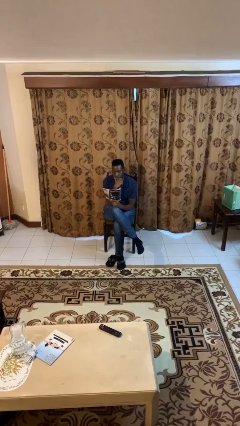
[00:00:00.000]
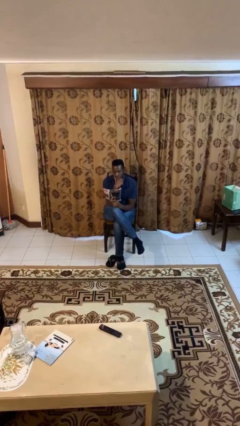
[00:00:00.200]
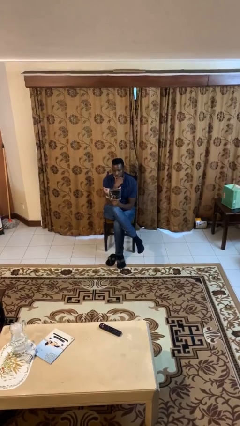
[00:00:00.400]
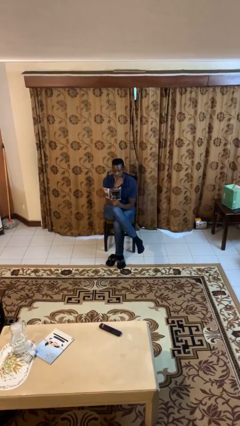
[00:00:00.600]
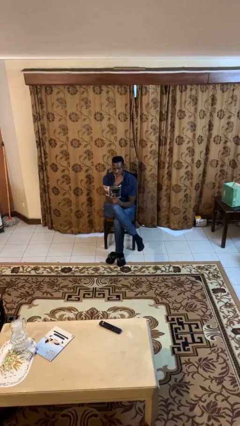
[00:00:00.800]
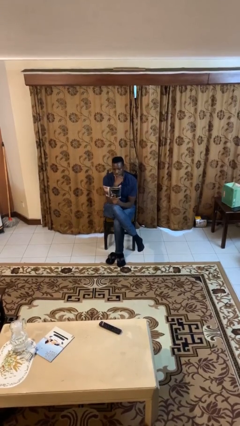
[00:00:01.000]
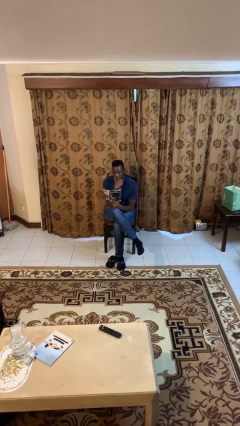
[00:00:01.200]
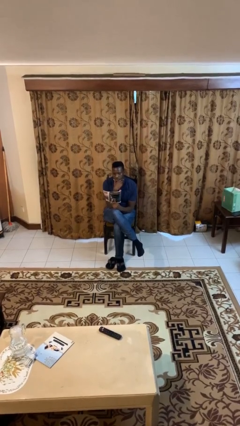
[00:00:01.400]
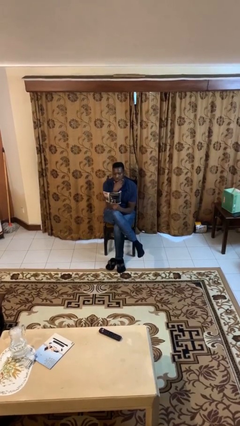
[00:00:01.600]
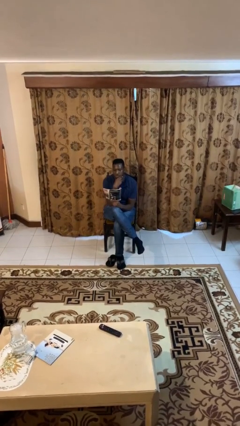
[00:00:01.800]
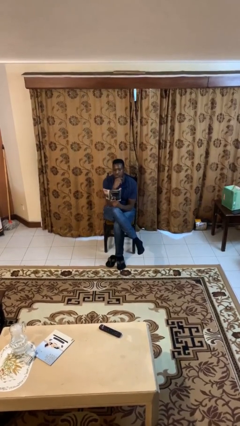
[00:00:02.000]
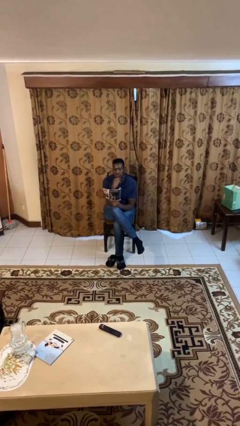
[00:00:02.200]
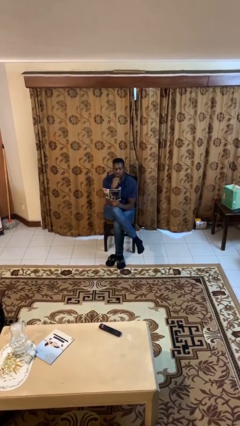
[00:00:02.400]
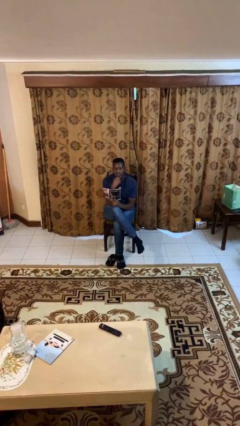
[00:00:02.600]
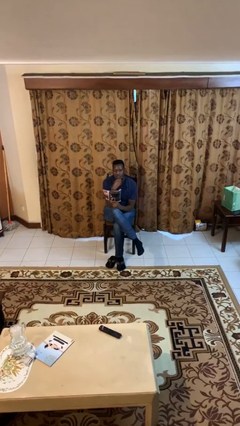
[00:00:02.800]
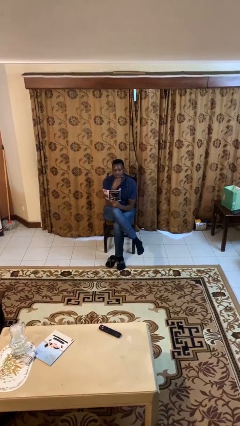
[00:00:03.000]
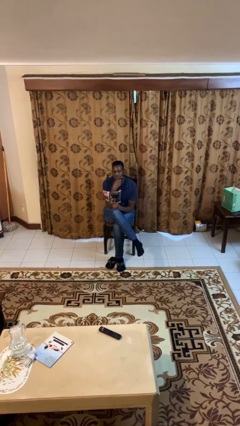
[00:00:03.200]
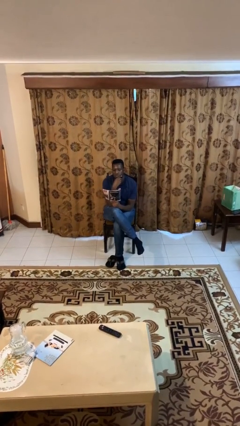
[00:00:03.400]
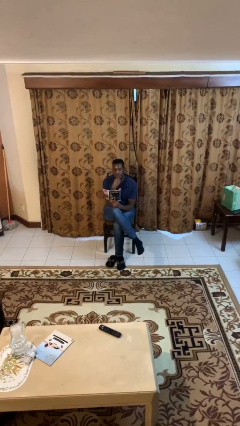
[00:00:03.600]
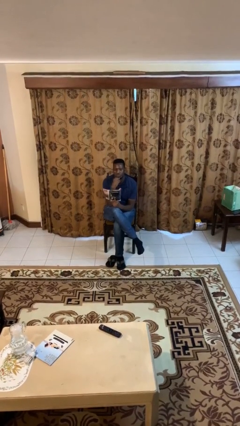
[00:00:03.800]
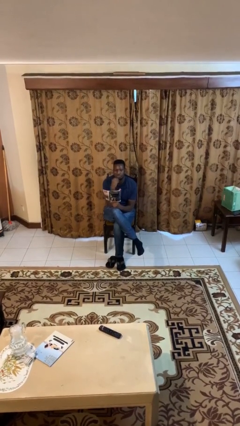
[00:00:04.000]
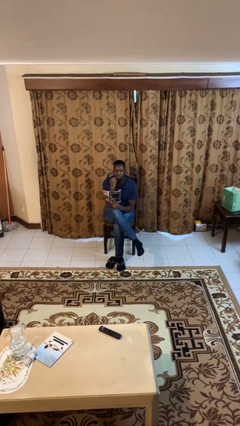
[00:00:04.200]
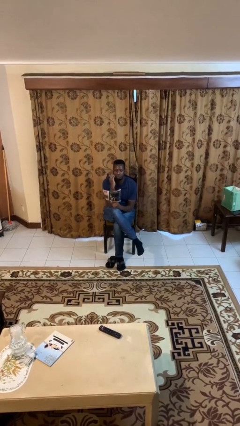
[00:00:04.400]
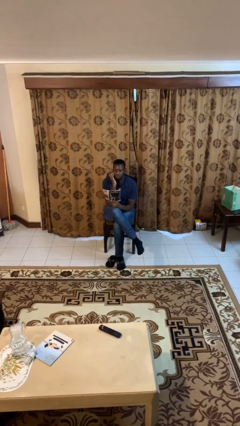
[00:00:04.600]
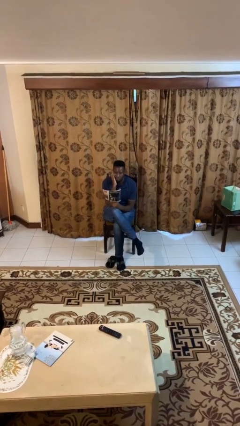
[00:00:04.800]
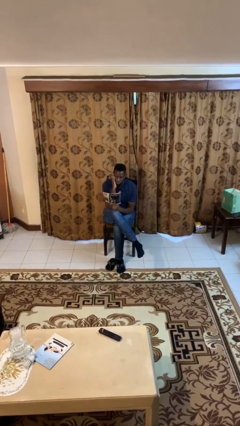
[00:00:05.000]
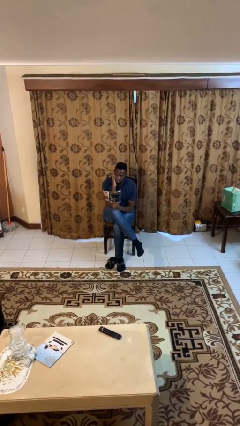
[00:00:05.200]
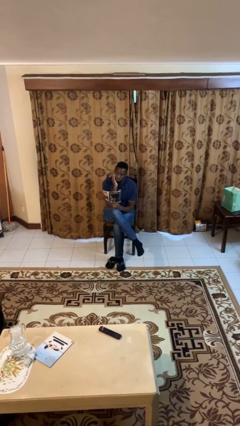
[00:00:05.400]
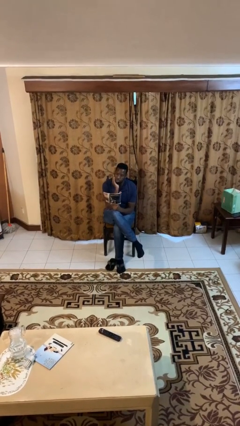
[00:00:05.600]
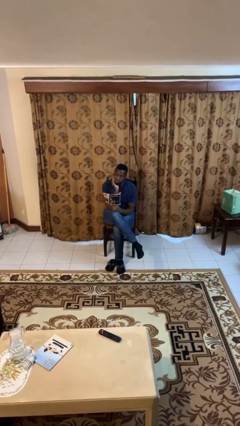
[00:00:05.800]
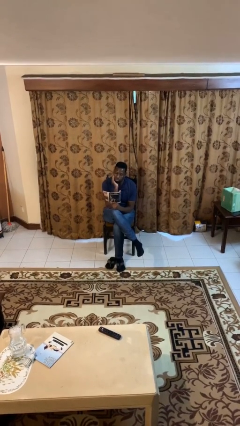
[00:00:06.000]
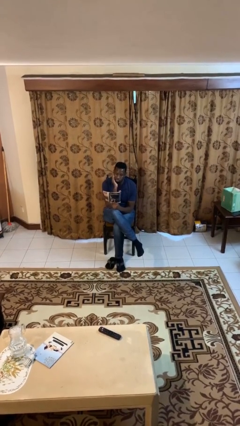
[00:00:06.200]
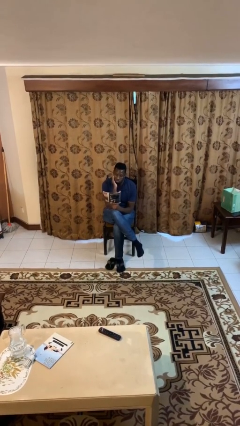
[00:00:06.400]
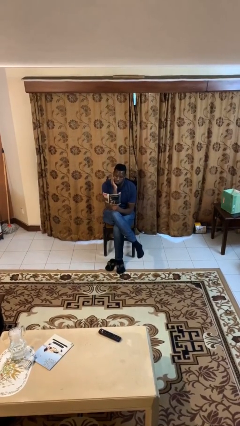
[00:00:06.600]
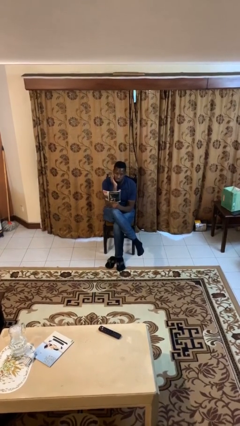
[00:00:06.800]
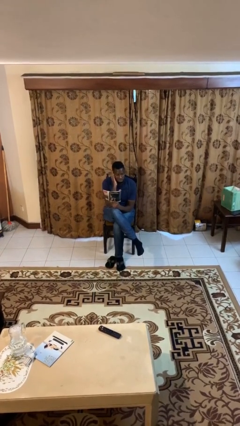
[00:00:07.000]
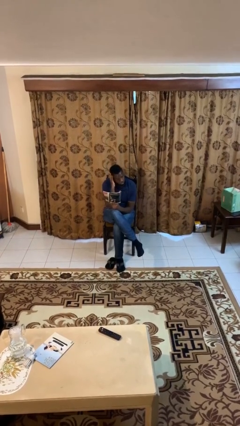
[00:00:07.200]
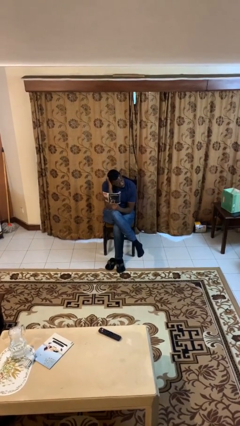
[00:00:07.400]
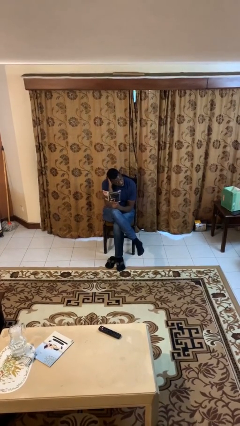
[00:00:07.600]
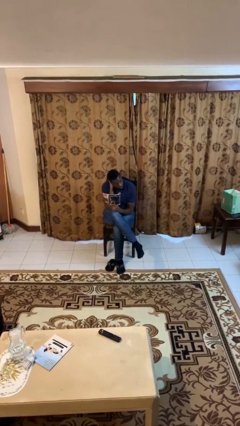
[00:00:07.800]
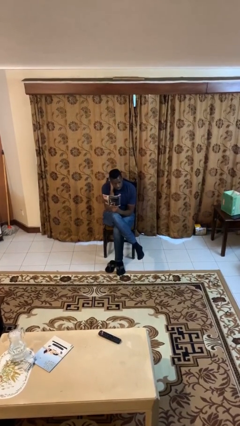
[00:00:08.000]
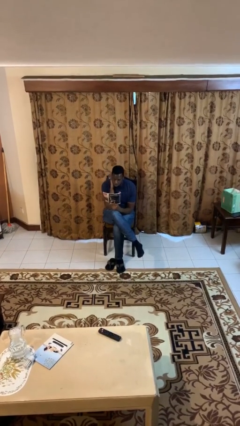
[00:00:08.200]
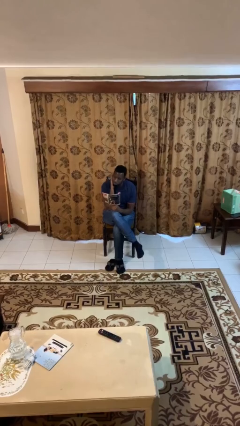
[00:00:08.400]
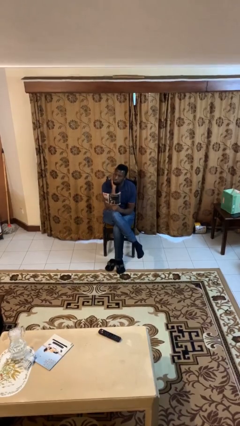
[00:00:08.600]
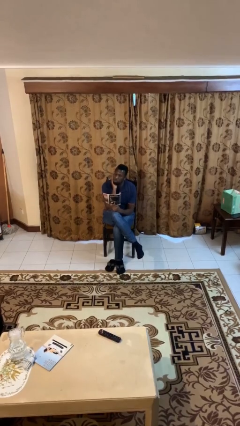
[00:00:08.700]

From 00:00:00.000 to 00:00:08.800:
person reads document

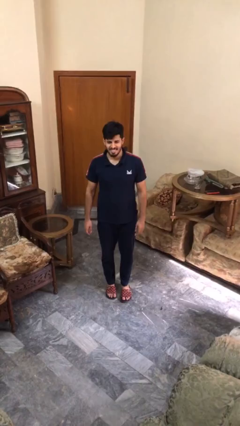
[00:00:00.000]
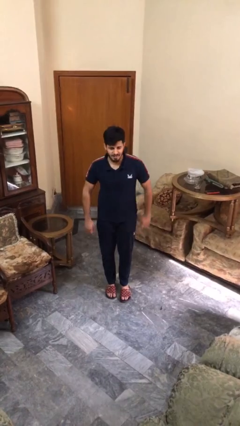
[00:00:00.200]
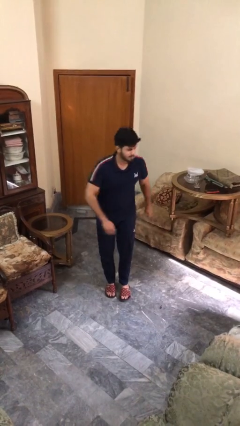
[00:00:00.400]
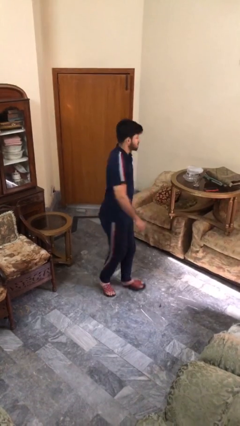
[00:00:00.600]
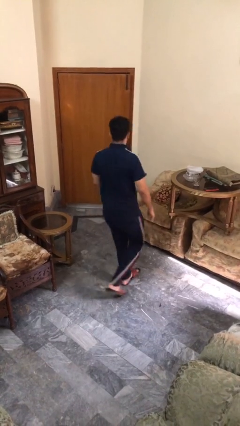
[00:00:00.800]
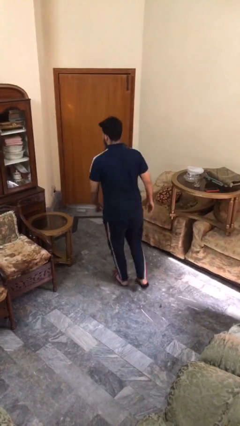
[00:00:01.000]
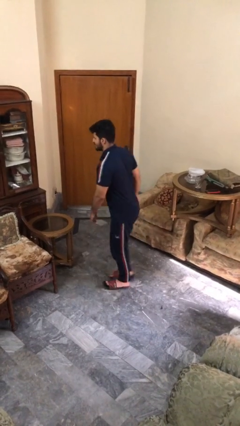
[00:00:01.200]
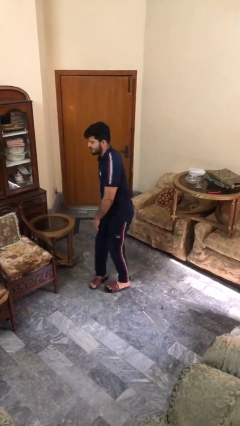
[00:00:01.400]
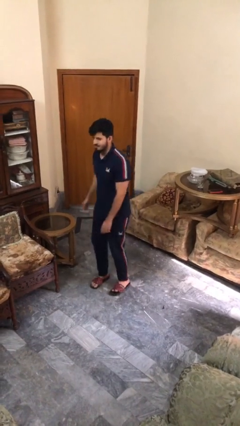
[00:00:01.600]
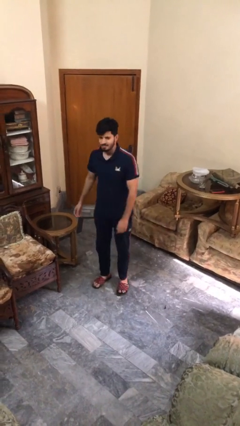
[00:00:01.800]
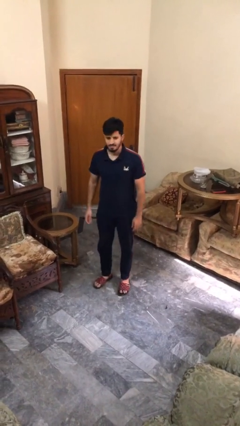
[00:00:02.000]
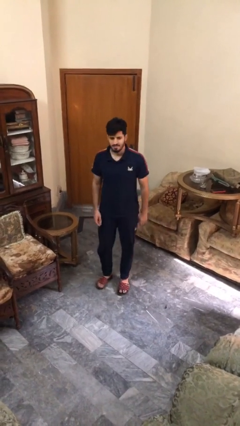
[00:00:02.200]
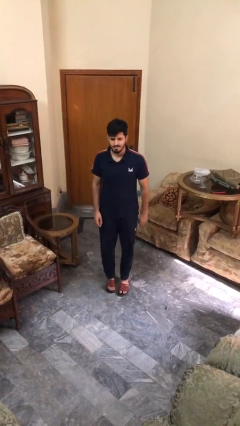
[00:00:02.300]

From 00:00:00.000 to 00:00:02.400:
person twirls

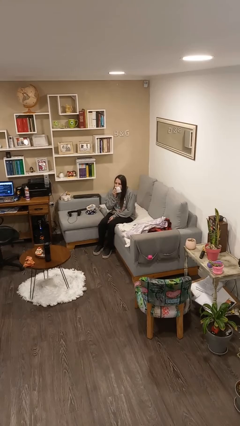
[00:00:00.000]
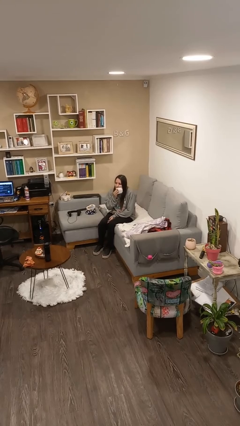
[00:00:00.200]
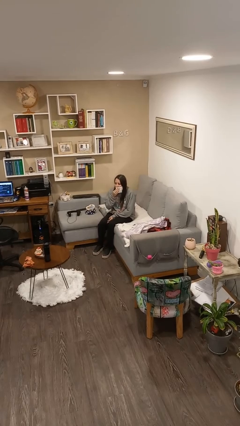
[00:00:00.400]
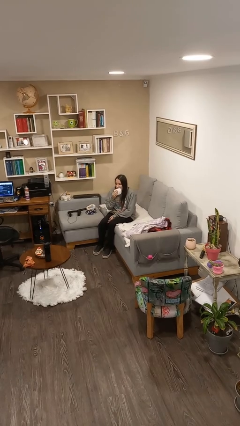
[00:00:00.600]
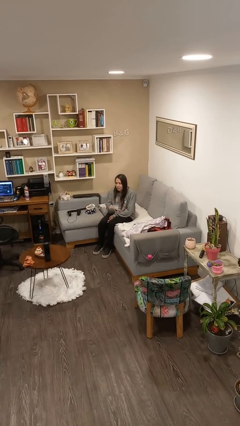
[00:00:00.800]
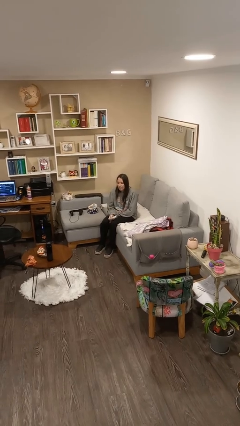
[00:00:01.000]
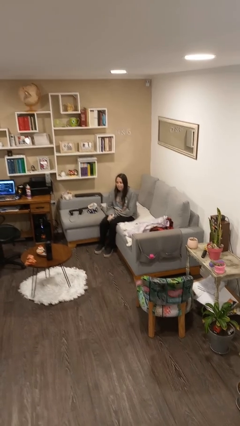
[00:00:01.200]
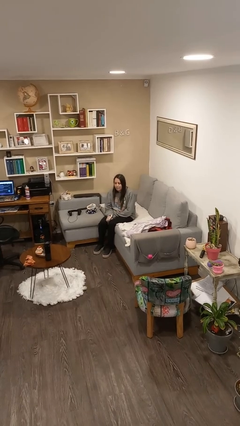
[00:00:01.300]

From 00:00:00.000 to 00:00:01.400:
person wipes mouth with napkin

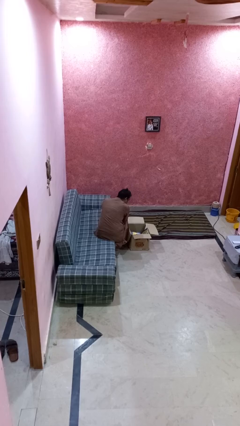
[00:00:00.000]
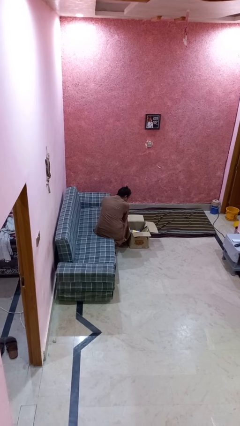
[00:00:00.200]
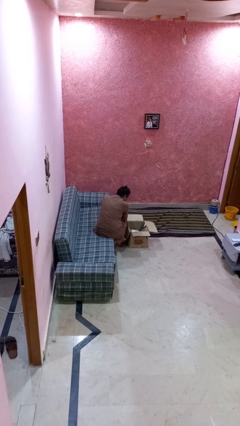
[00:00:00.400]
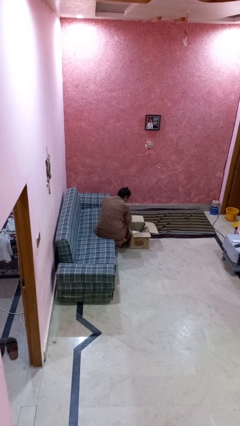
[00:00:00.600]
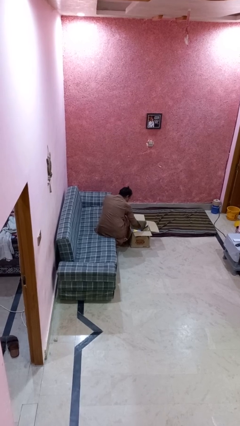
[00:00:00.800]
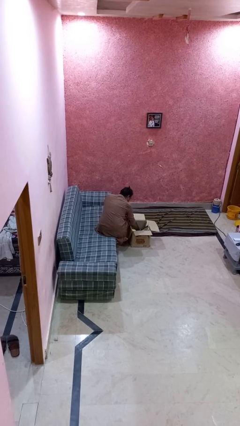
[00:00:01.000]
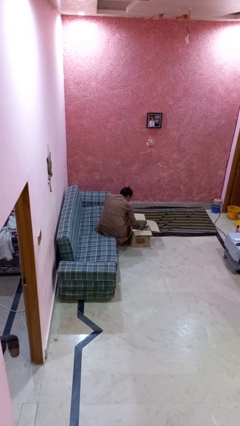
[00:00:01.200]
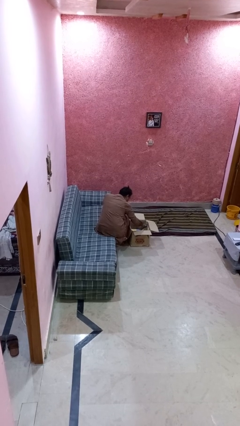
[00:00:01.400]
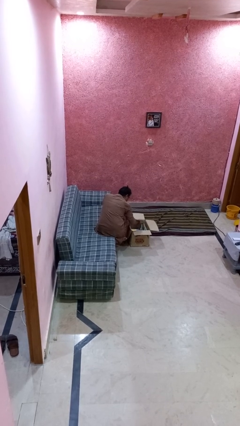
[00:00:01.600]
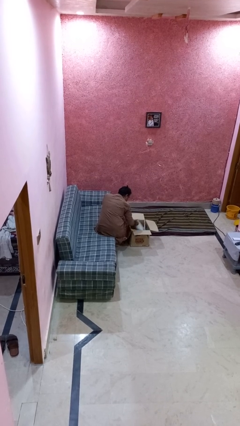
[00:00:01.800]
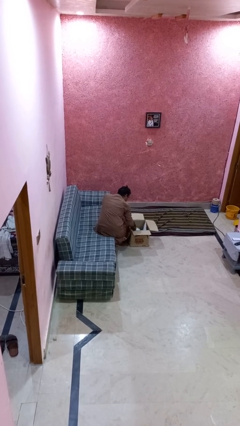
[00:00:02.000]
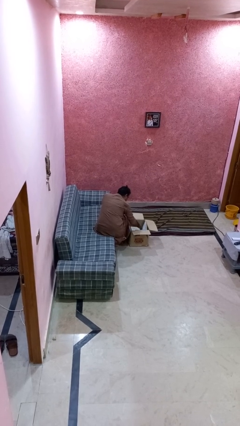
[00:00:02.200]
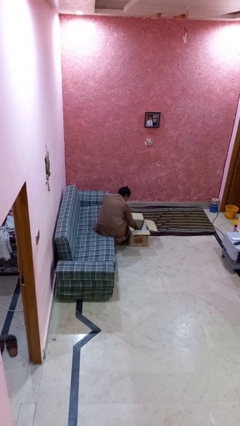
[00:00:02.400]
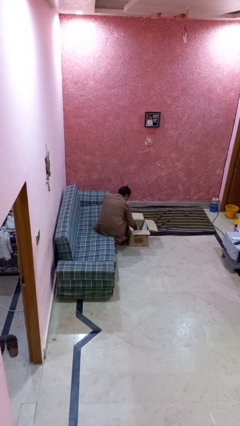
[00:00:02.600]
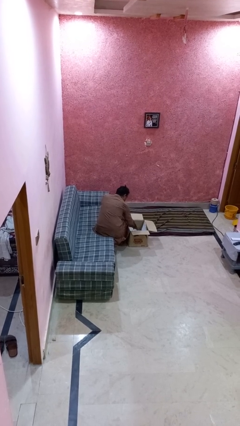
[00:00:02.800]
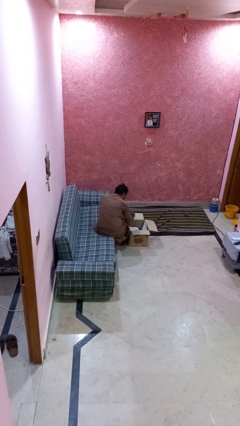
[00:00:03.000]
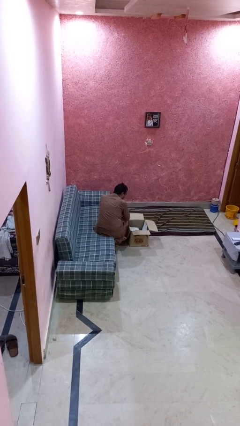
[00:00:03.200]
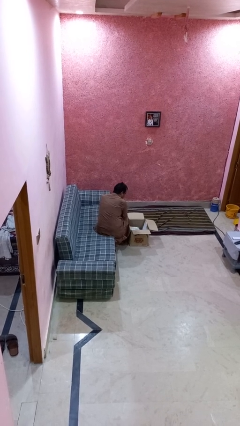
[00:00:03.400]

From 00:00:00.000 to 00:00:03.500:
person searches in box

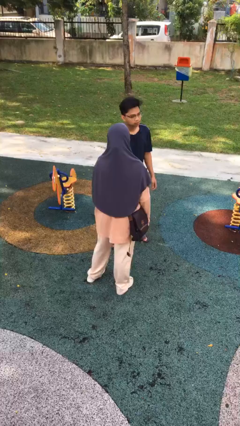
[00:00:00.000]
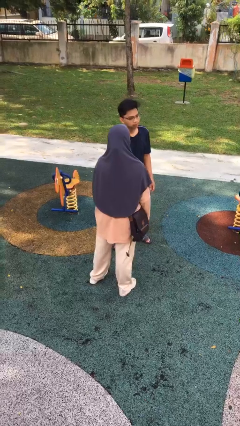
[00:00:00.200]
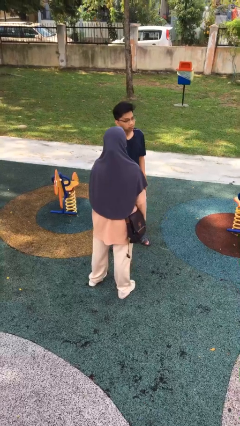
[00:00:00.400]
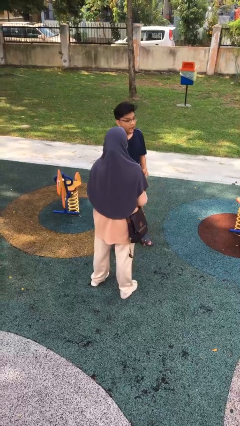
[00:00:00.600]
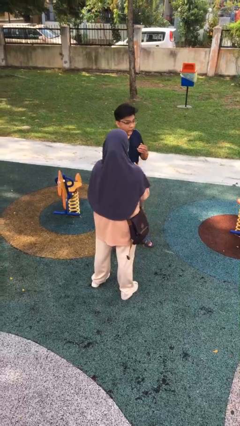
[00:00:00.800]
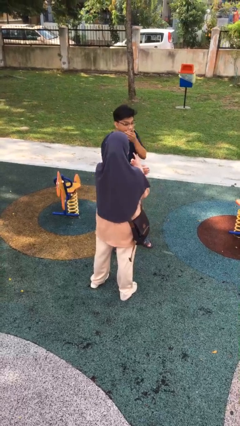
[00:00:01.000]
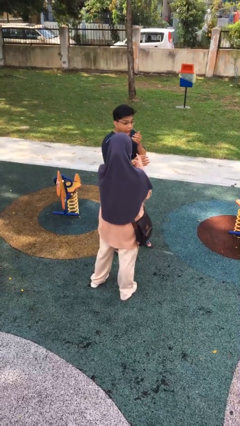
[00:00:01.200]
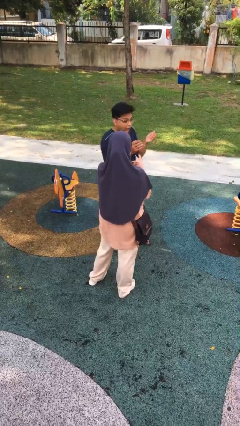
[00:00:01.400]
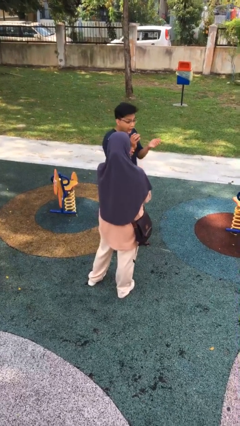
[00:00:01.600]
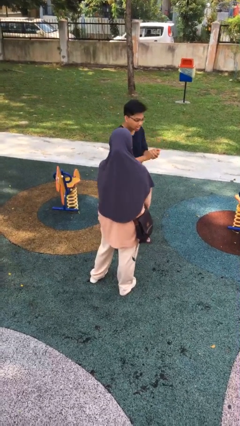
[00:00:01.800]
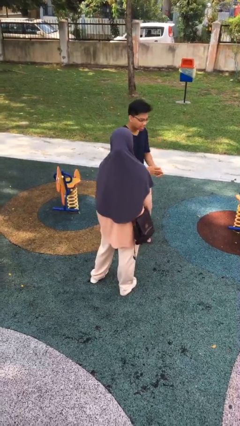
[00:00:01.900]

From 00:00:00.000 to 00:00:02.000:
person laughs with person
